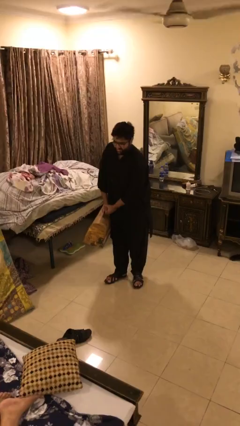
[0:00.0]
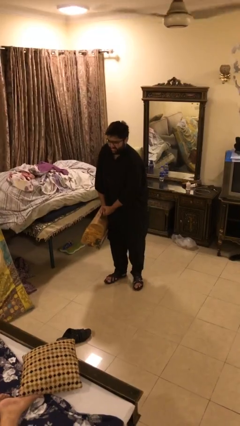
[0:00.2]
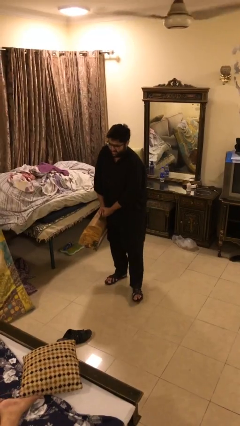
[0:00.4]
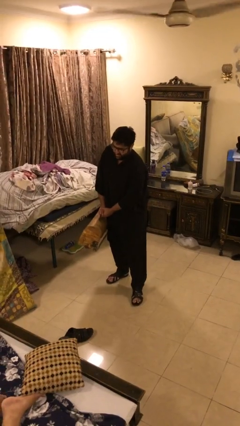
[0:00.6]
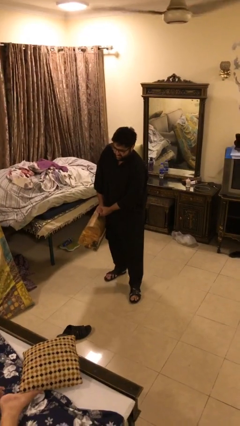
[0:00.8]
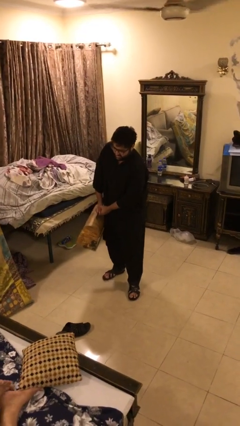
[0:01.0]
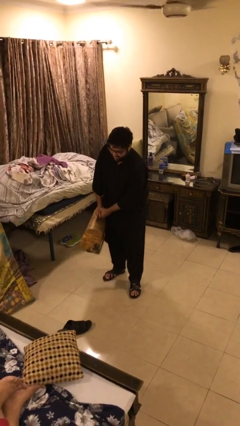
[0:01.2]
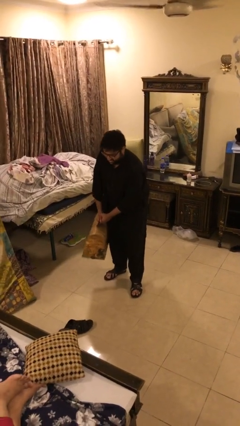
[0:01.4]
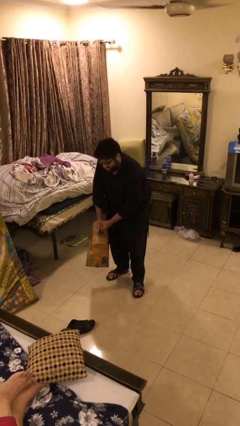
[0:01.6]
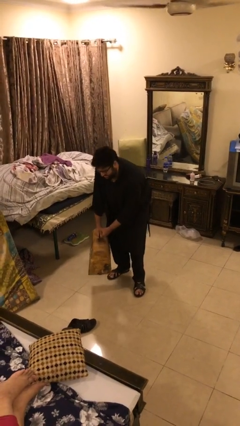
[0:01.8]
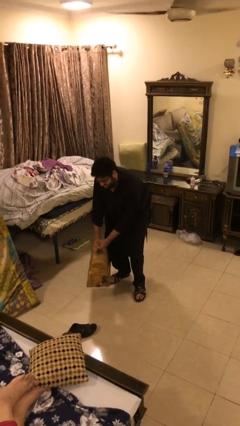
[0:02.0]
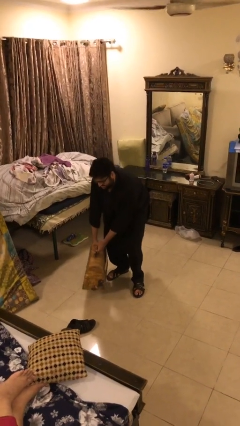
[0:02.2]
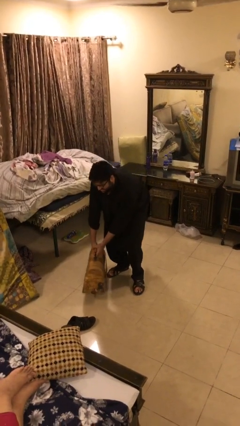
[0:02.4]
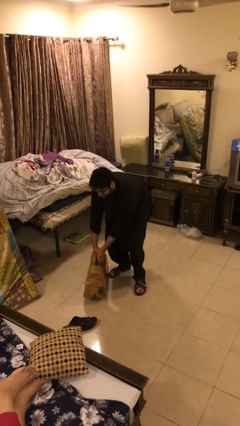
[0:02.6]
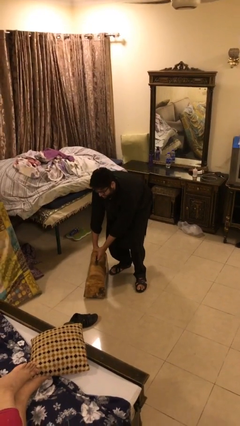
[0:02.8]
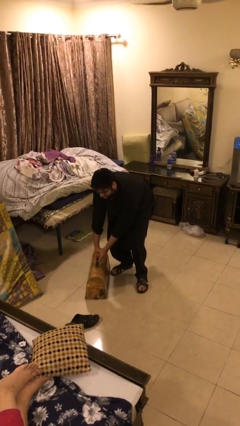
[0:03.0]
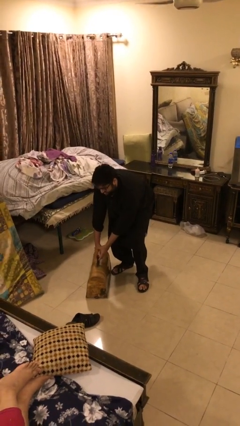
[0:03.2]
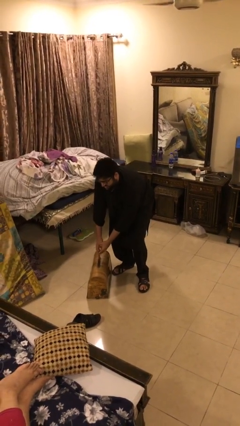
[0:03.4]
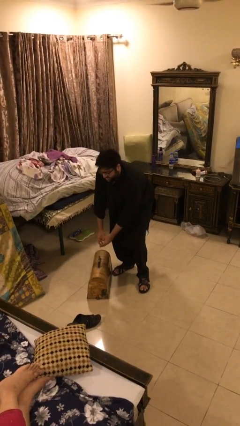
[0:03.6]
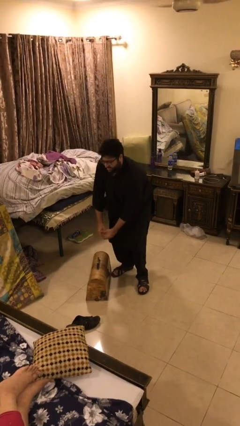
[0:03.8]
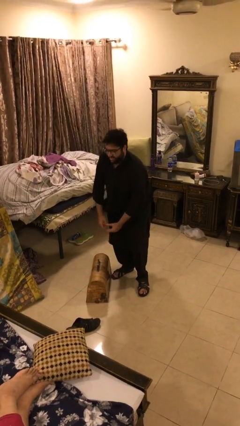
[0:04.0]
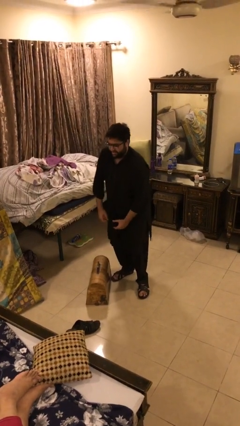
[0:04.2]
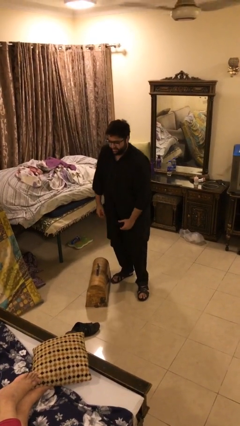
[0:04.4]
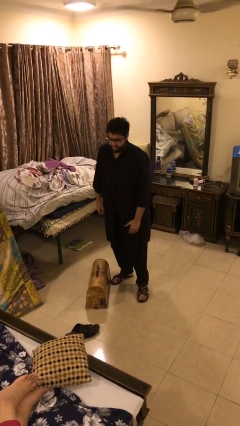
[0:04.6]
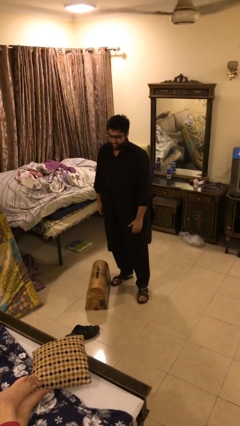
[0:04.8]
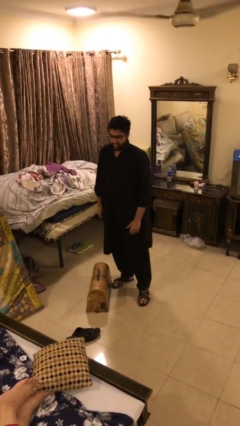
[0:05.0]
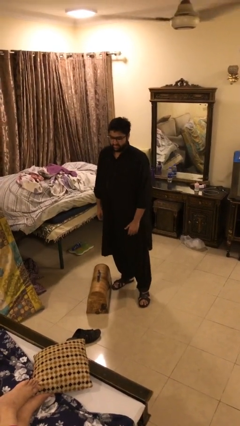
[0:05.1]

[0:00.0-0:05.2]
person puts down object on floor

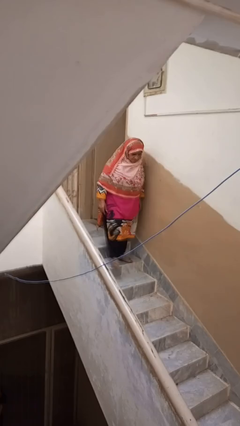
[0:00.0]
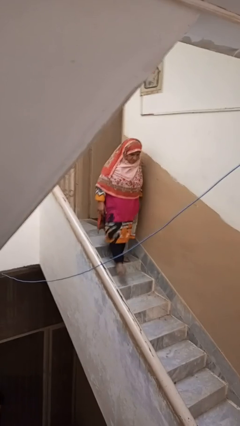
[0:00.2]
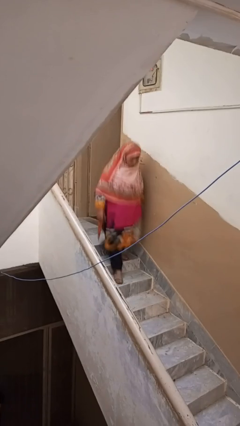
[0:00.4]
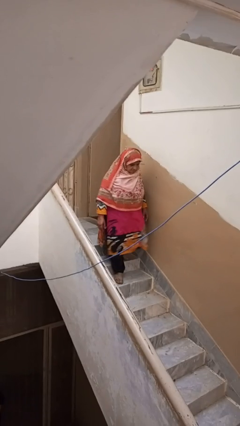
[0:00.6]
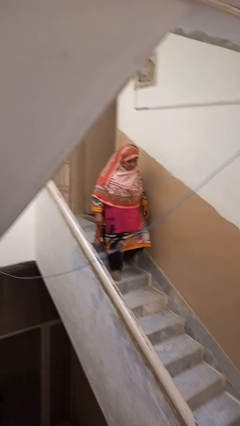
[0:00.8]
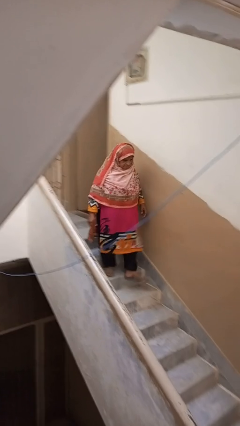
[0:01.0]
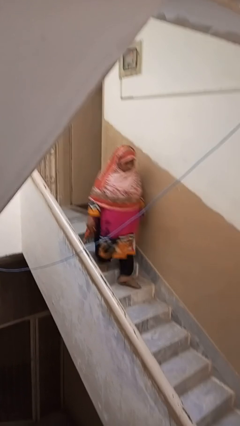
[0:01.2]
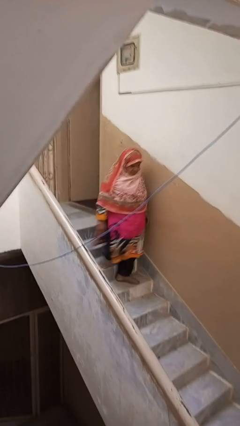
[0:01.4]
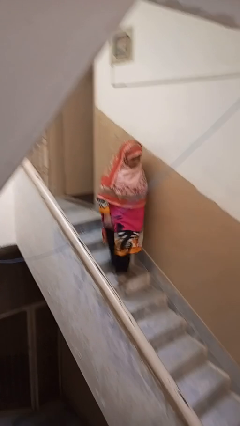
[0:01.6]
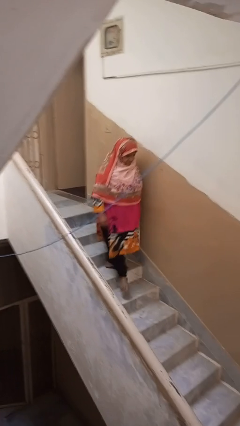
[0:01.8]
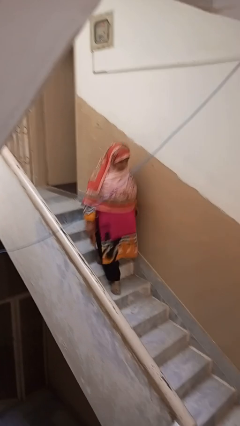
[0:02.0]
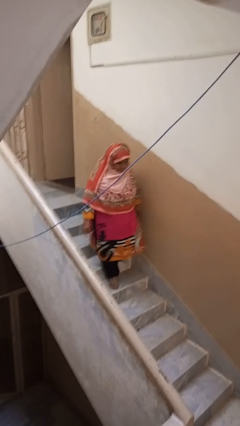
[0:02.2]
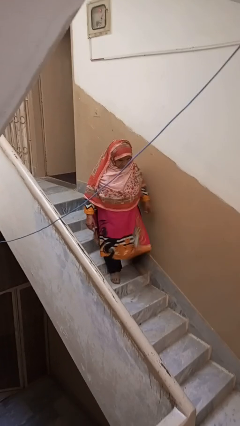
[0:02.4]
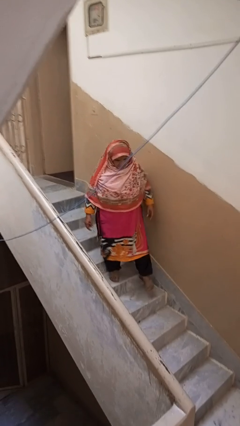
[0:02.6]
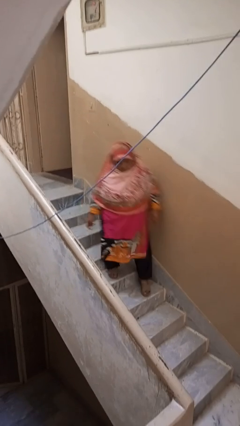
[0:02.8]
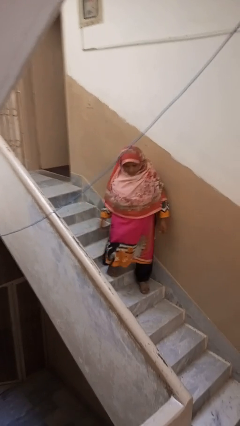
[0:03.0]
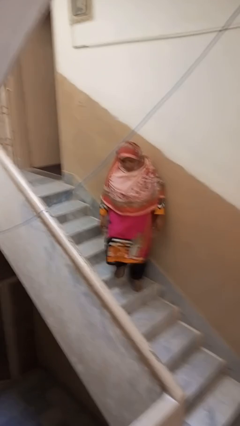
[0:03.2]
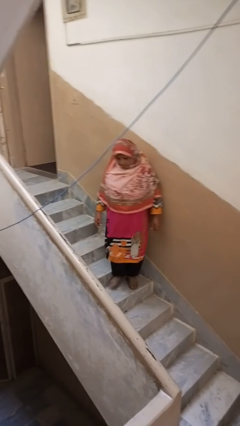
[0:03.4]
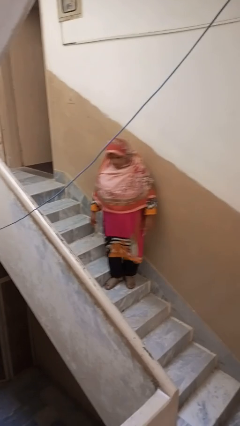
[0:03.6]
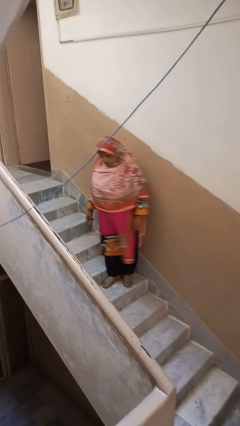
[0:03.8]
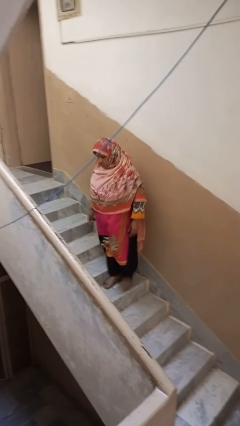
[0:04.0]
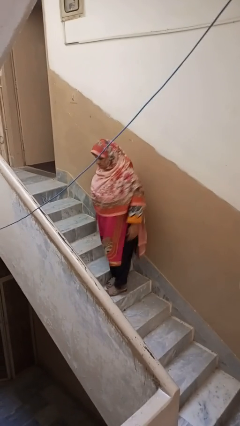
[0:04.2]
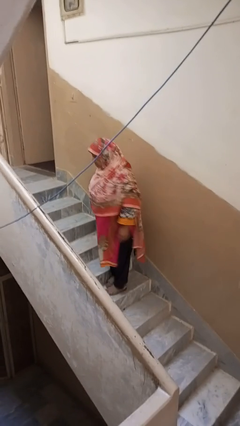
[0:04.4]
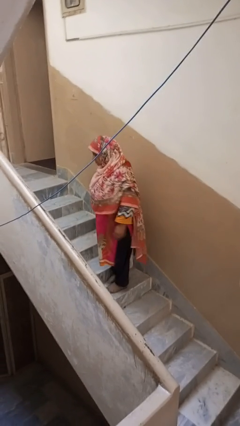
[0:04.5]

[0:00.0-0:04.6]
person climbs down stairs

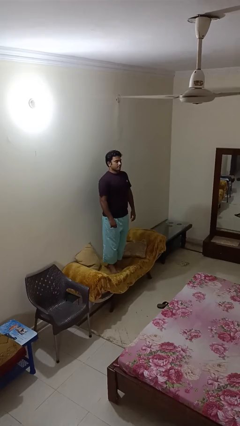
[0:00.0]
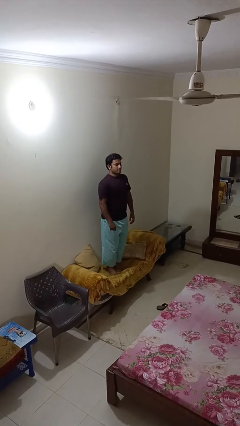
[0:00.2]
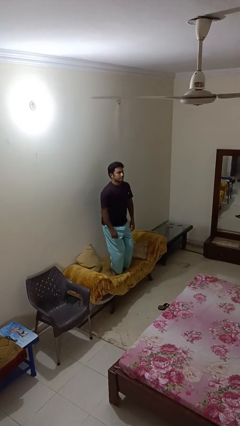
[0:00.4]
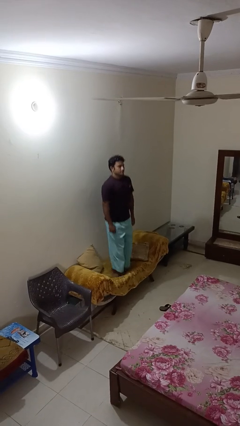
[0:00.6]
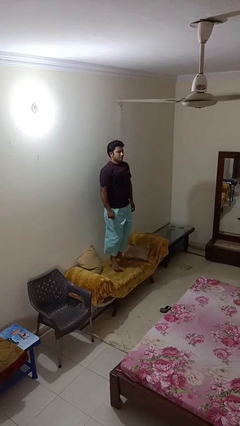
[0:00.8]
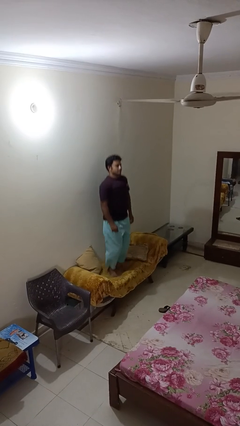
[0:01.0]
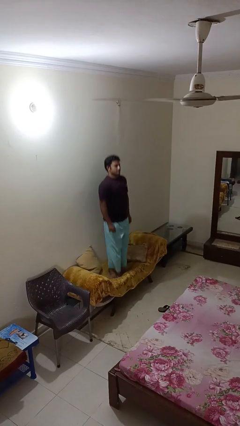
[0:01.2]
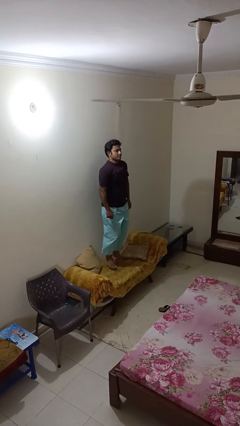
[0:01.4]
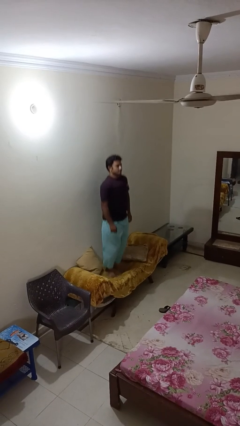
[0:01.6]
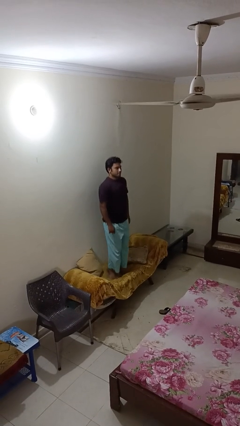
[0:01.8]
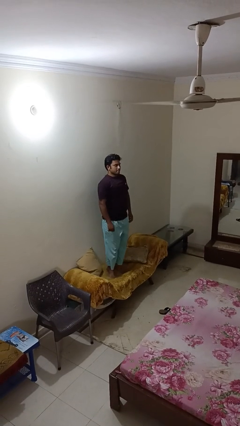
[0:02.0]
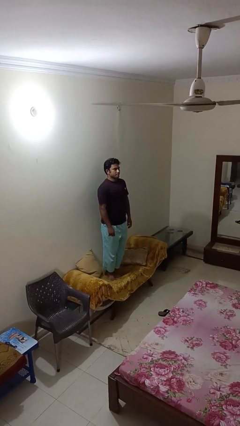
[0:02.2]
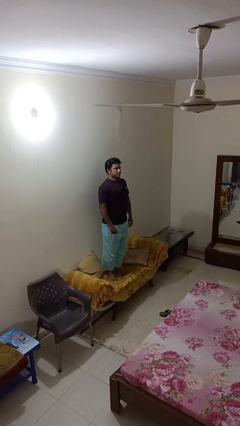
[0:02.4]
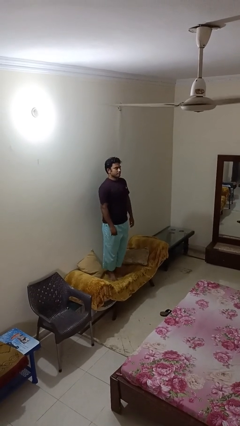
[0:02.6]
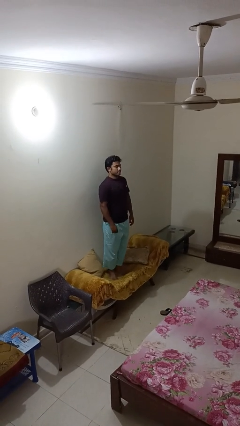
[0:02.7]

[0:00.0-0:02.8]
person jumps on couch

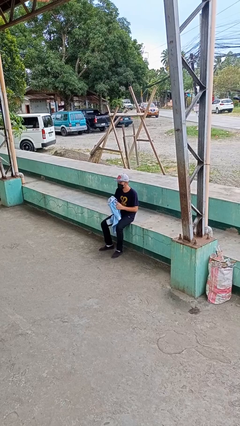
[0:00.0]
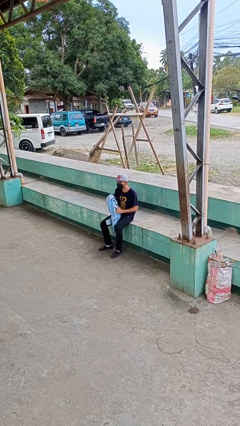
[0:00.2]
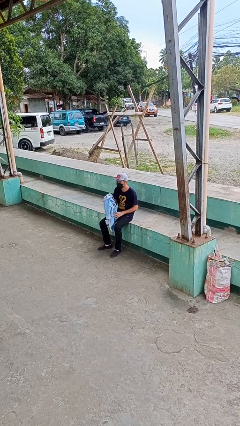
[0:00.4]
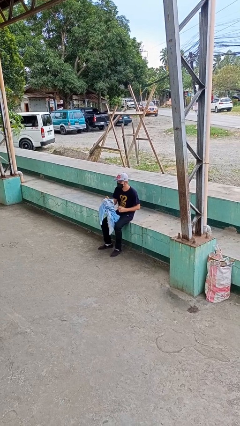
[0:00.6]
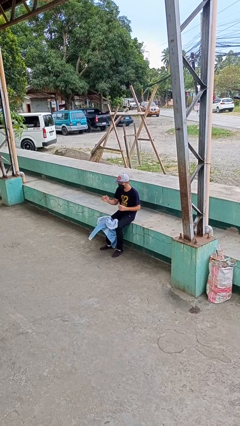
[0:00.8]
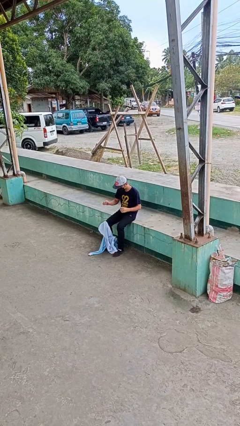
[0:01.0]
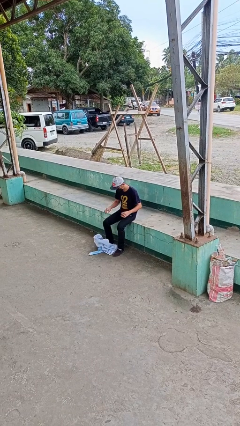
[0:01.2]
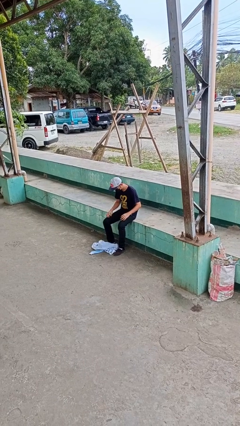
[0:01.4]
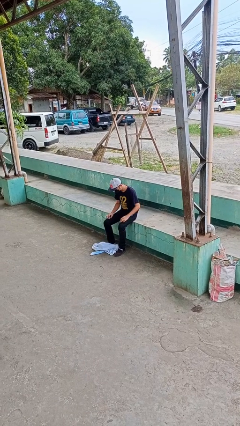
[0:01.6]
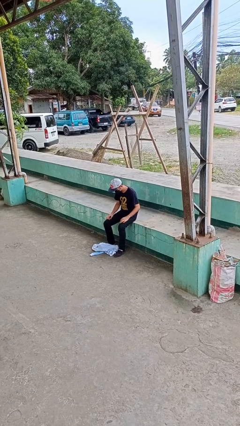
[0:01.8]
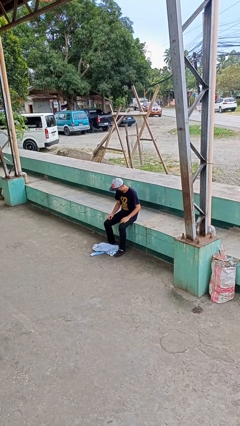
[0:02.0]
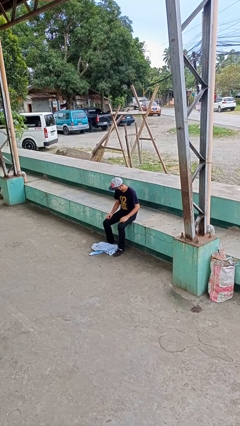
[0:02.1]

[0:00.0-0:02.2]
person drops object

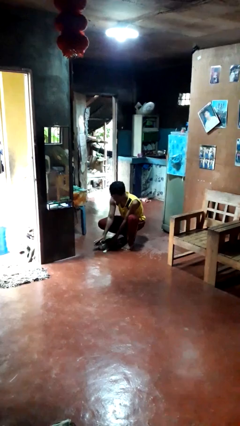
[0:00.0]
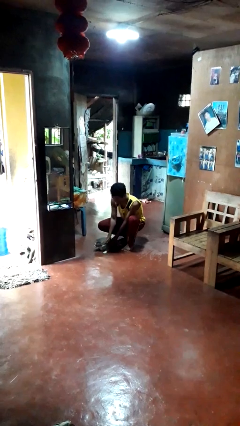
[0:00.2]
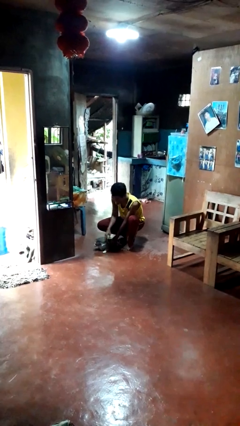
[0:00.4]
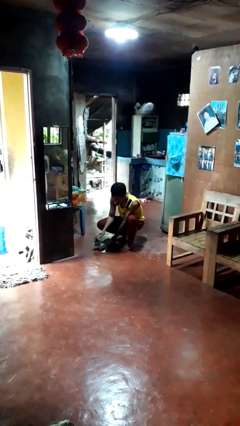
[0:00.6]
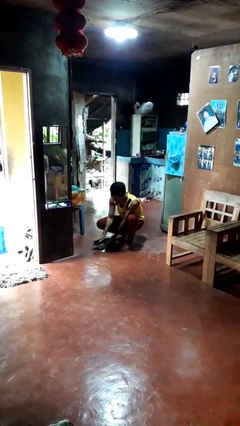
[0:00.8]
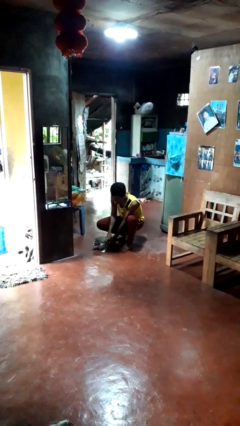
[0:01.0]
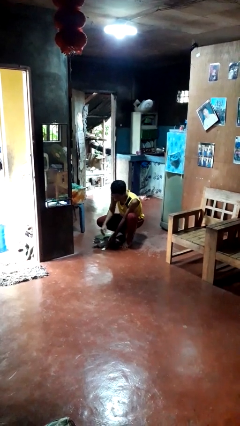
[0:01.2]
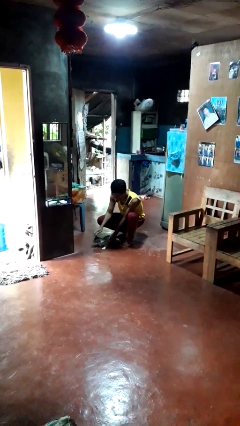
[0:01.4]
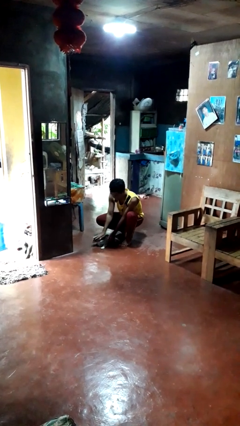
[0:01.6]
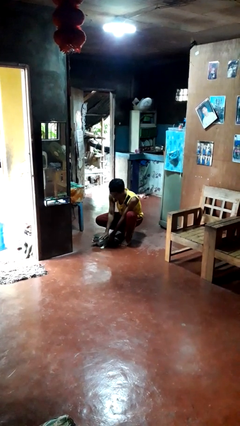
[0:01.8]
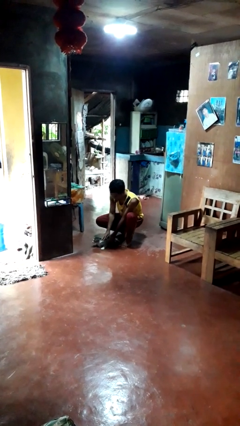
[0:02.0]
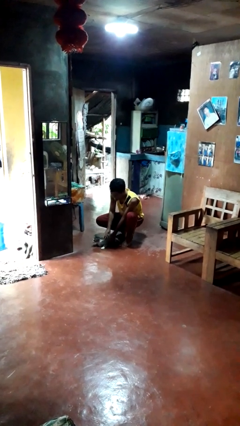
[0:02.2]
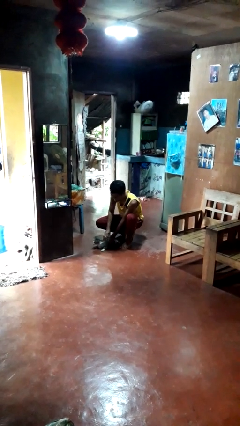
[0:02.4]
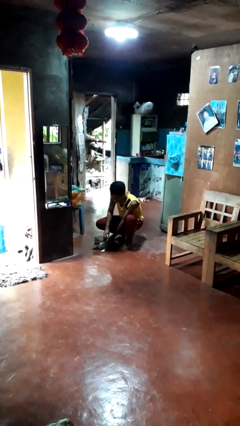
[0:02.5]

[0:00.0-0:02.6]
person pets cat

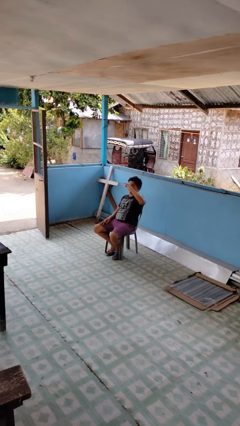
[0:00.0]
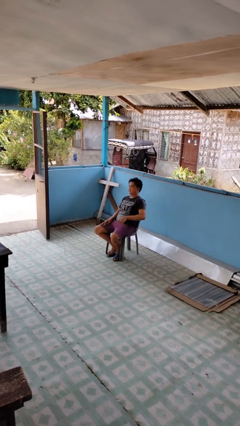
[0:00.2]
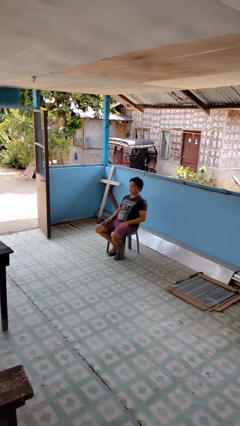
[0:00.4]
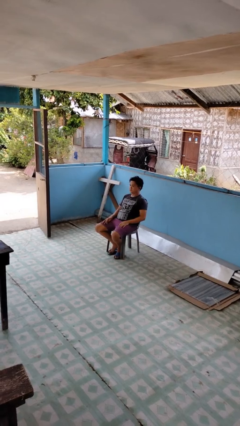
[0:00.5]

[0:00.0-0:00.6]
person gestures lower hand

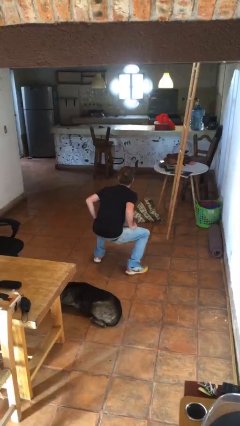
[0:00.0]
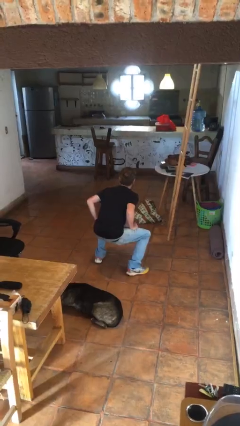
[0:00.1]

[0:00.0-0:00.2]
person stands up
